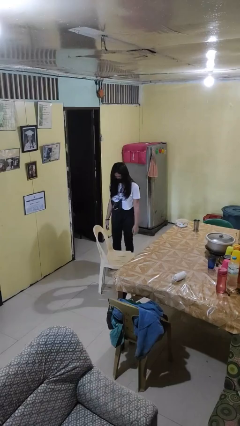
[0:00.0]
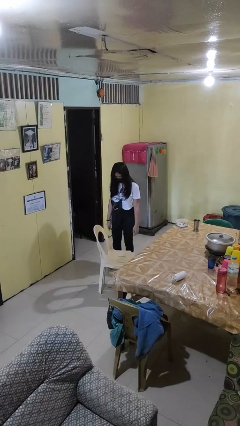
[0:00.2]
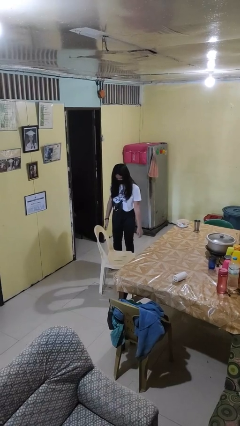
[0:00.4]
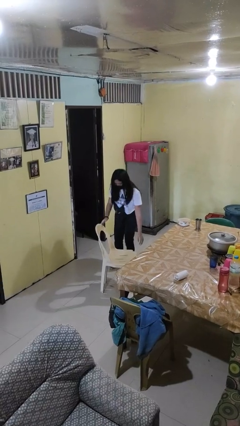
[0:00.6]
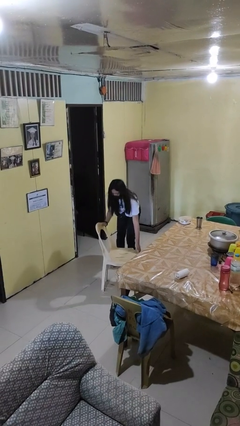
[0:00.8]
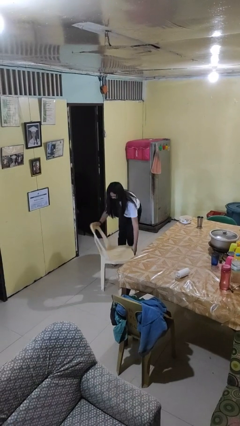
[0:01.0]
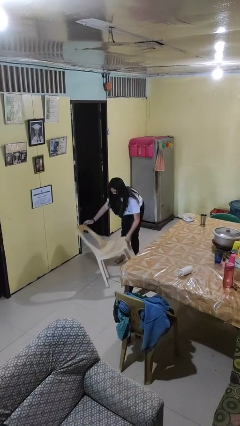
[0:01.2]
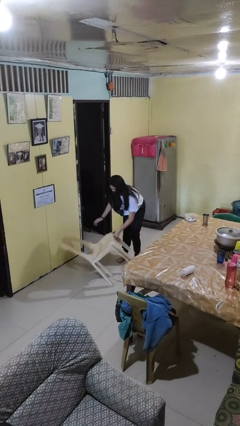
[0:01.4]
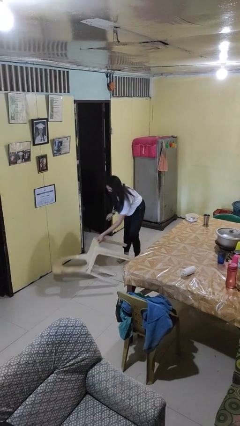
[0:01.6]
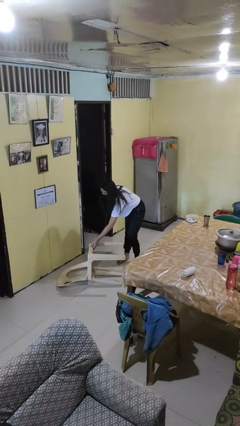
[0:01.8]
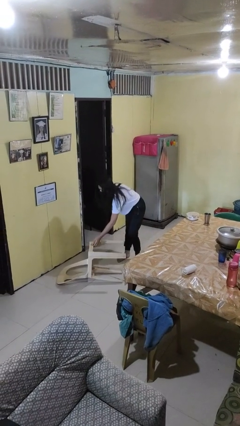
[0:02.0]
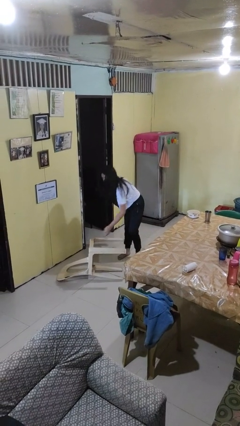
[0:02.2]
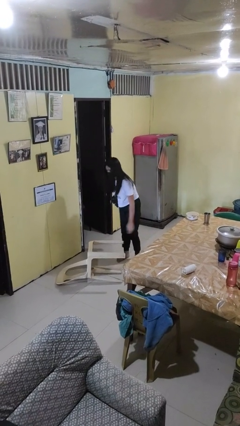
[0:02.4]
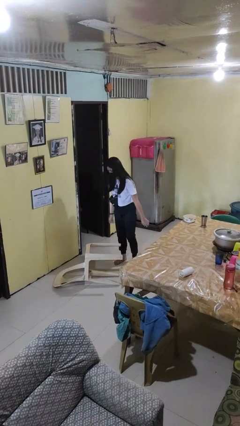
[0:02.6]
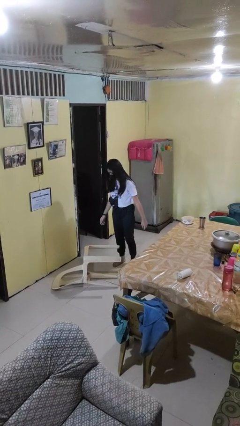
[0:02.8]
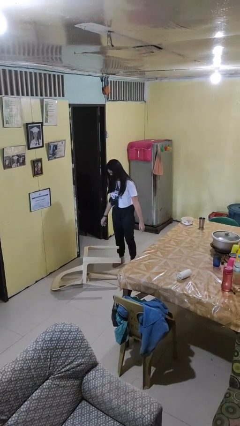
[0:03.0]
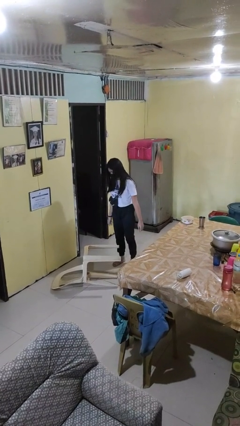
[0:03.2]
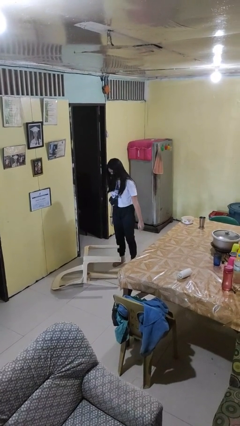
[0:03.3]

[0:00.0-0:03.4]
person knocks over furniture

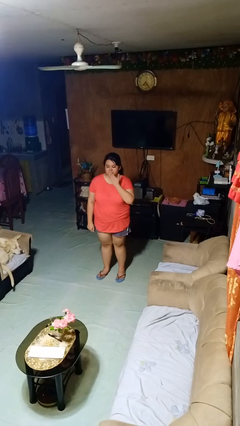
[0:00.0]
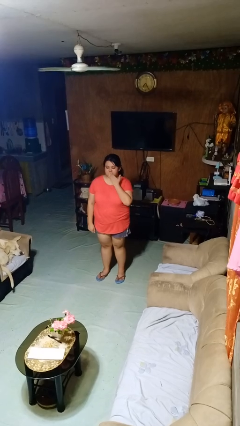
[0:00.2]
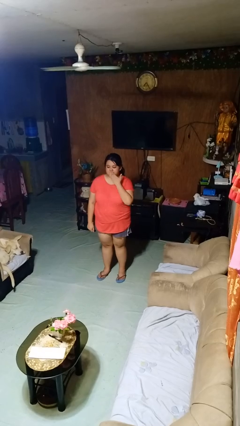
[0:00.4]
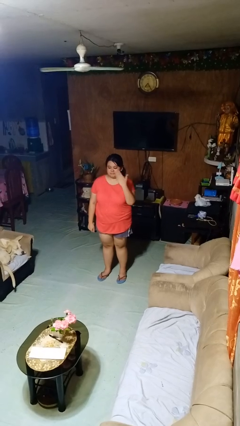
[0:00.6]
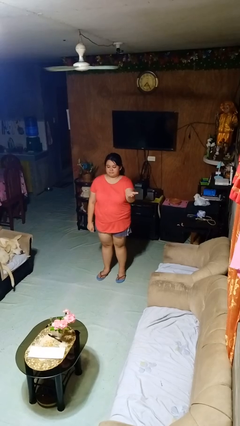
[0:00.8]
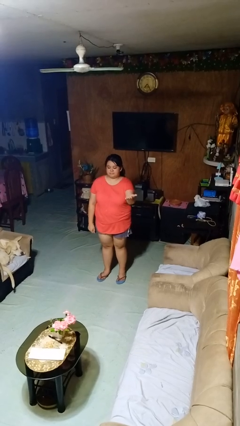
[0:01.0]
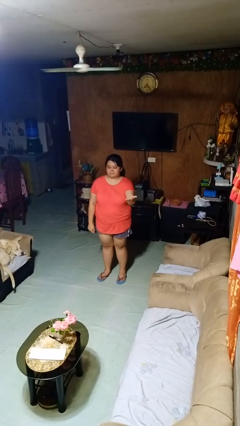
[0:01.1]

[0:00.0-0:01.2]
person gestures blow kiss

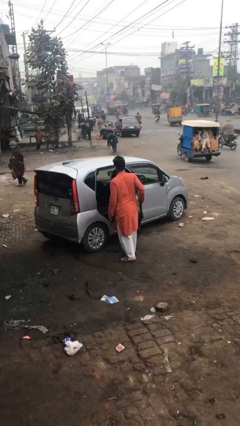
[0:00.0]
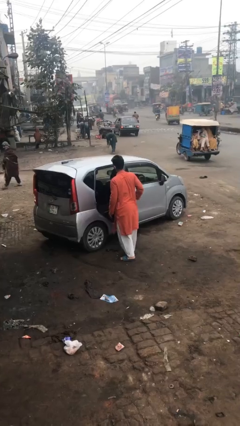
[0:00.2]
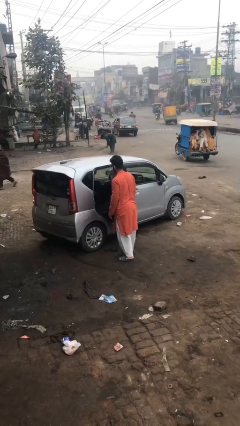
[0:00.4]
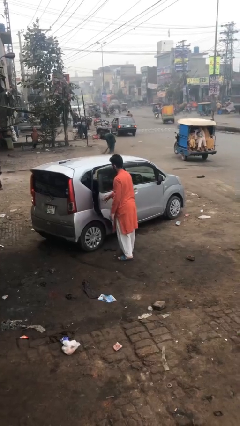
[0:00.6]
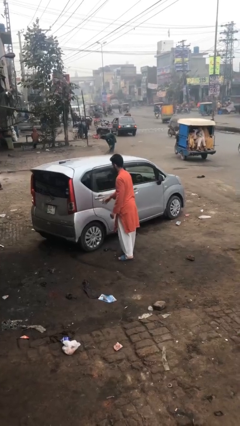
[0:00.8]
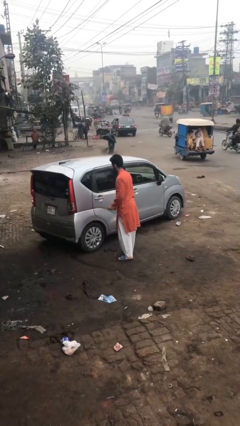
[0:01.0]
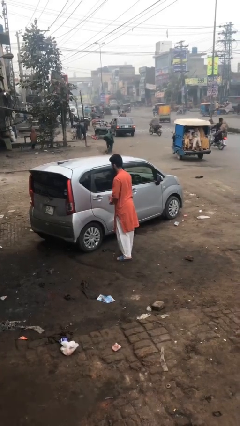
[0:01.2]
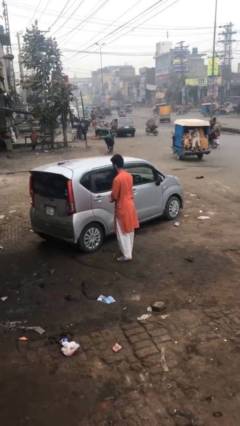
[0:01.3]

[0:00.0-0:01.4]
person closes car door

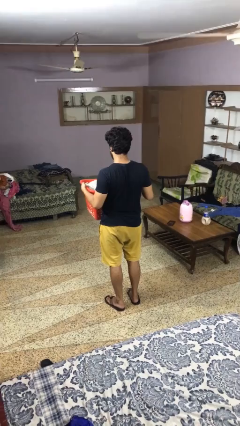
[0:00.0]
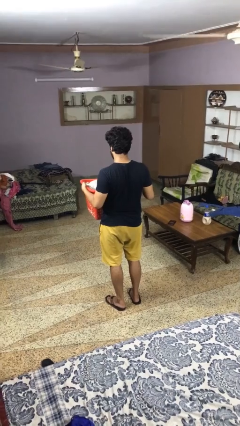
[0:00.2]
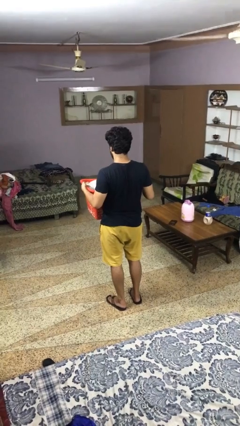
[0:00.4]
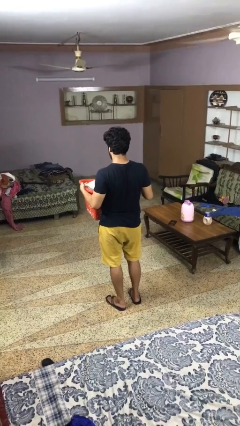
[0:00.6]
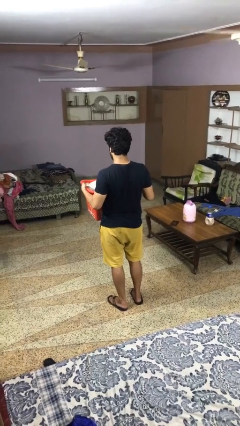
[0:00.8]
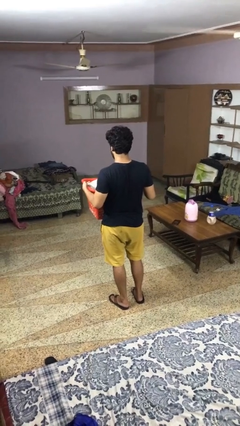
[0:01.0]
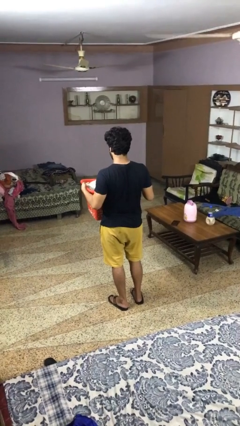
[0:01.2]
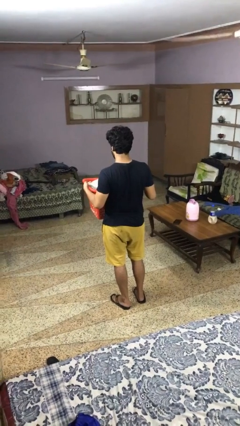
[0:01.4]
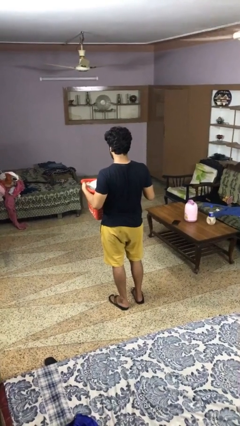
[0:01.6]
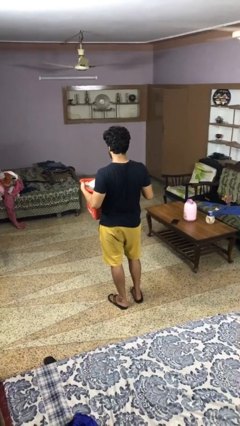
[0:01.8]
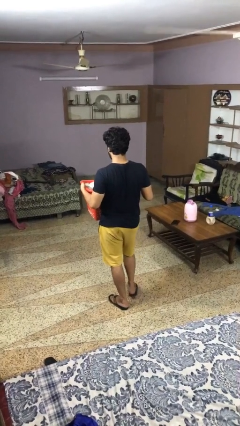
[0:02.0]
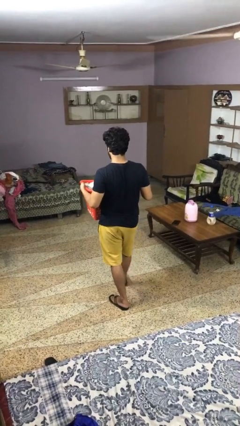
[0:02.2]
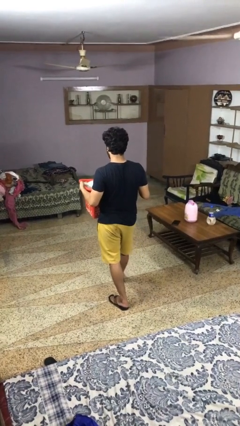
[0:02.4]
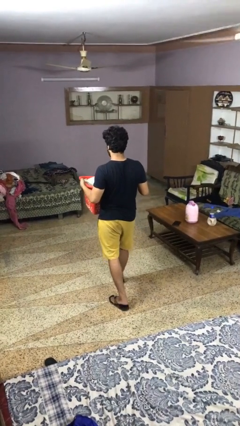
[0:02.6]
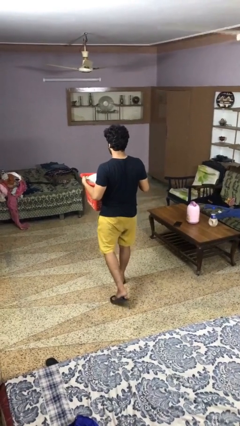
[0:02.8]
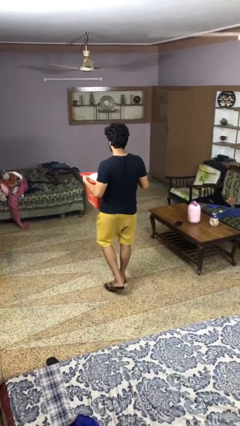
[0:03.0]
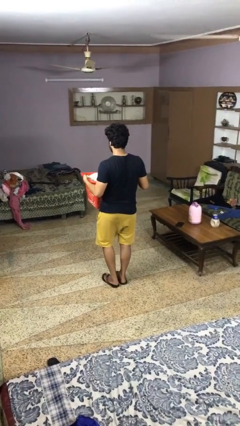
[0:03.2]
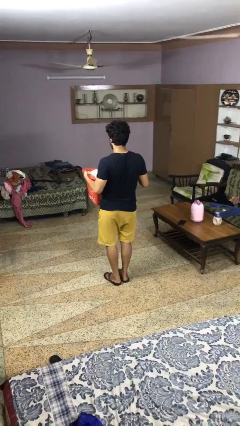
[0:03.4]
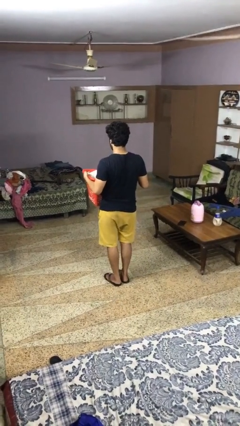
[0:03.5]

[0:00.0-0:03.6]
person carries laundry basket

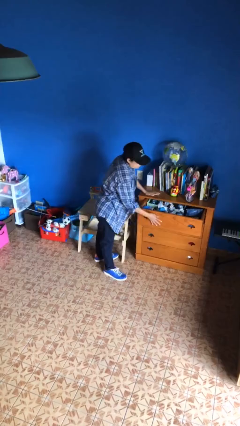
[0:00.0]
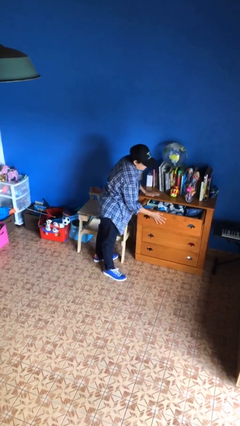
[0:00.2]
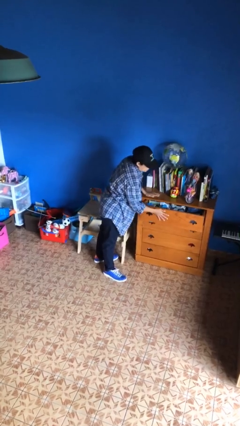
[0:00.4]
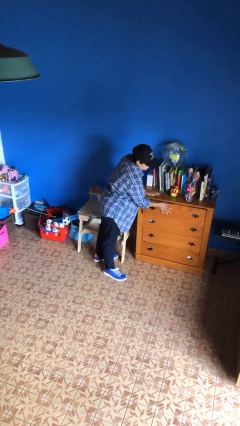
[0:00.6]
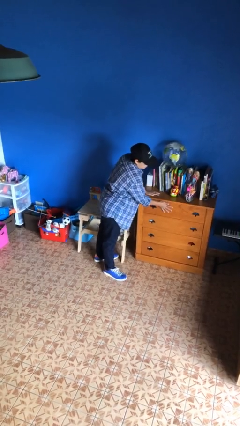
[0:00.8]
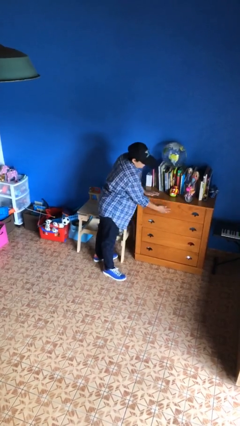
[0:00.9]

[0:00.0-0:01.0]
person closes dresser drawer

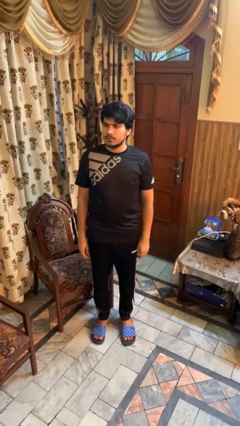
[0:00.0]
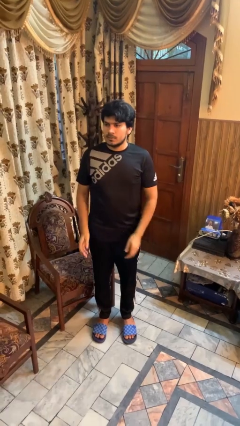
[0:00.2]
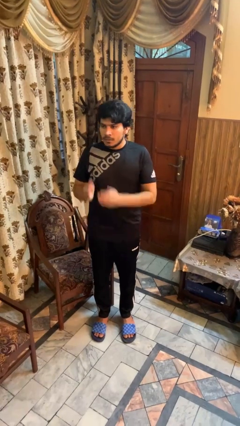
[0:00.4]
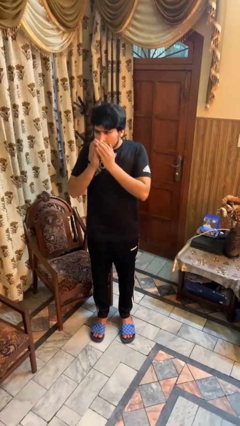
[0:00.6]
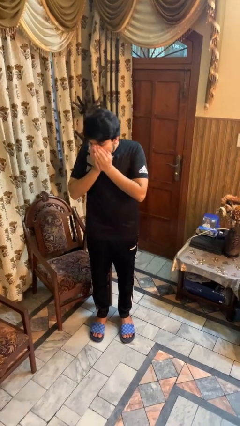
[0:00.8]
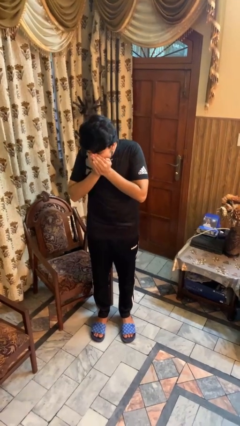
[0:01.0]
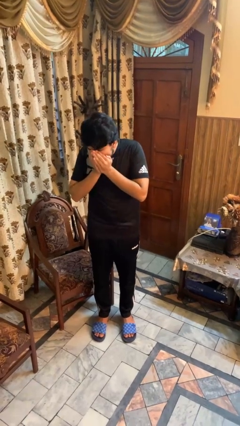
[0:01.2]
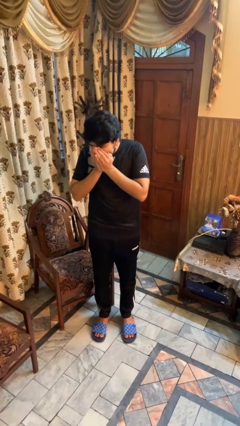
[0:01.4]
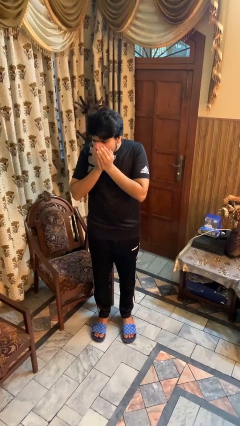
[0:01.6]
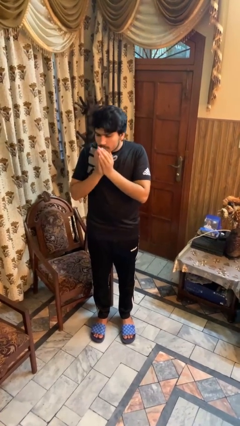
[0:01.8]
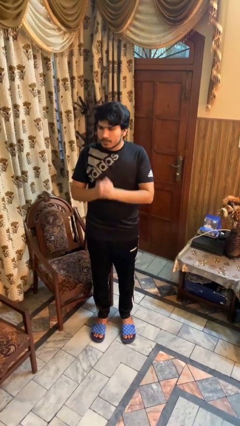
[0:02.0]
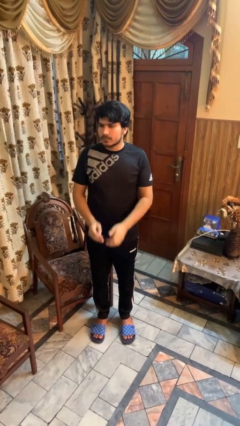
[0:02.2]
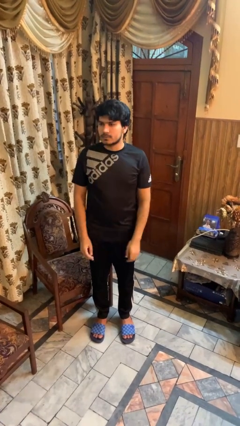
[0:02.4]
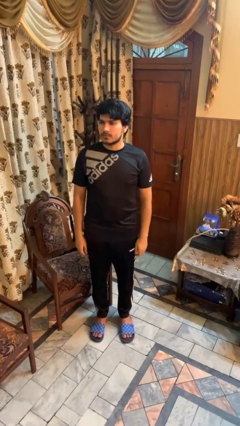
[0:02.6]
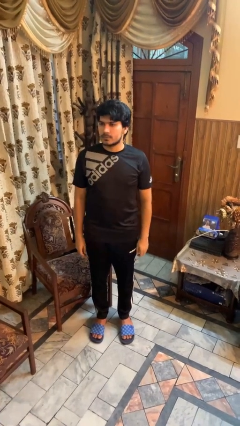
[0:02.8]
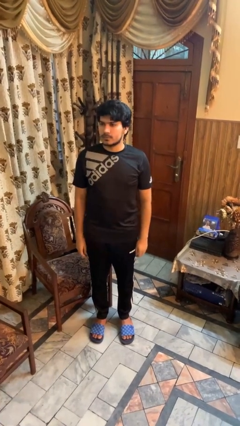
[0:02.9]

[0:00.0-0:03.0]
person sneezes into hand

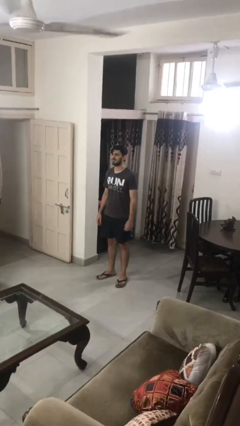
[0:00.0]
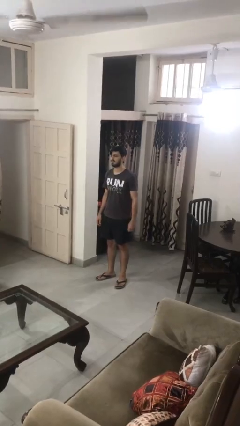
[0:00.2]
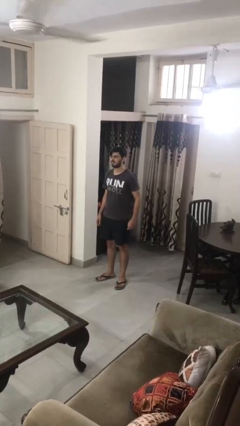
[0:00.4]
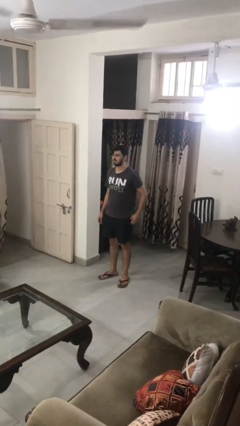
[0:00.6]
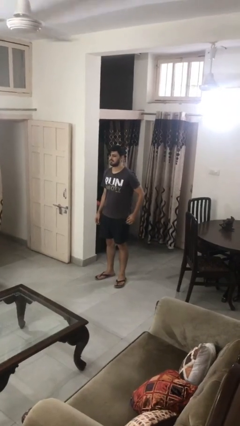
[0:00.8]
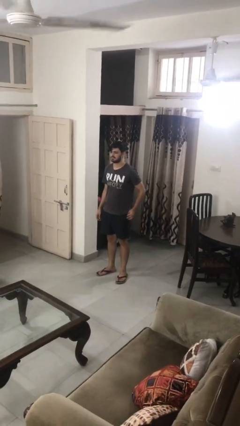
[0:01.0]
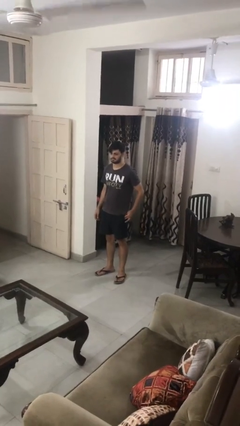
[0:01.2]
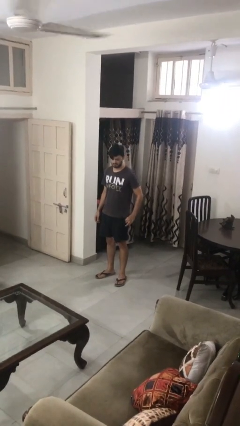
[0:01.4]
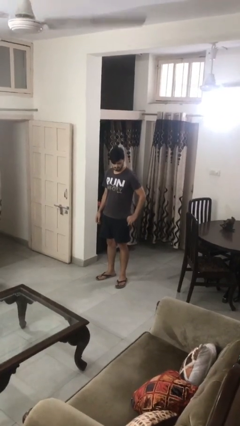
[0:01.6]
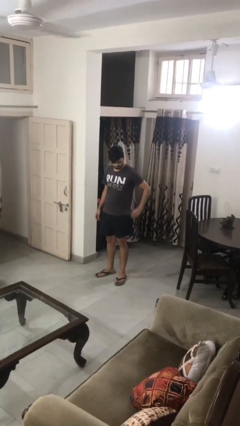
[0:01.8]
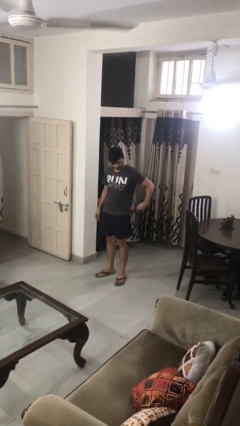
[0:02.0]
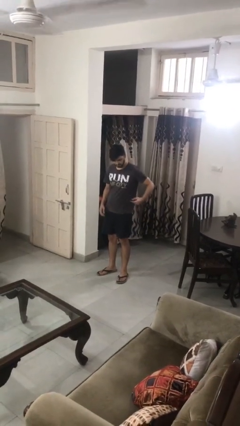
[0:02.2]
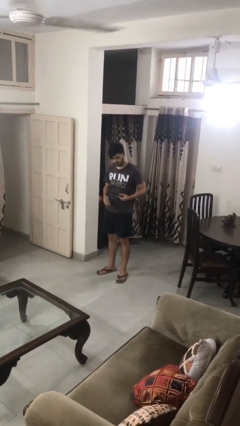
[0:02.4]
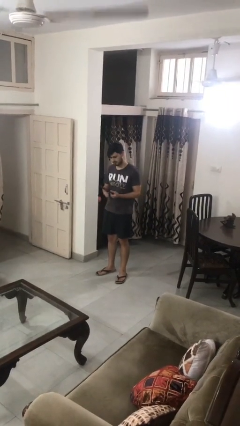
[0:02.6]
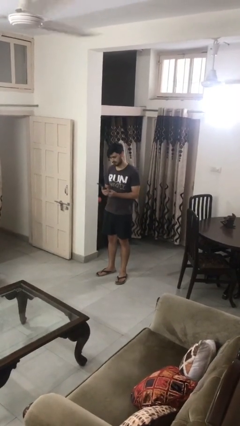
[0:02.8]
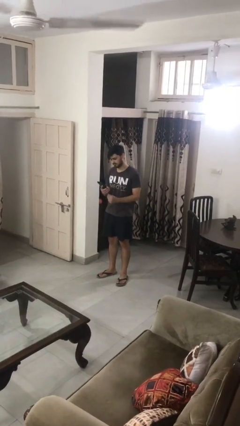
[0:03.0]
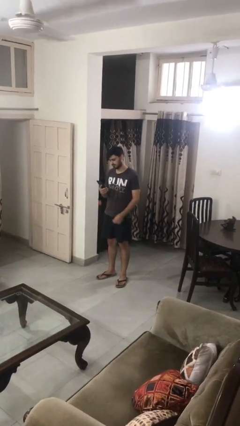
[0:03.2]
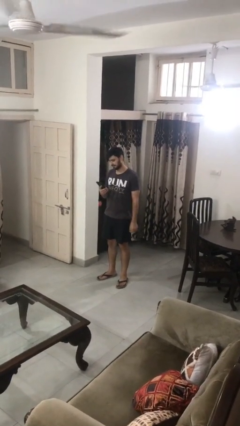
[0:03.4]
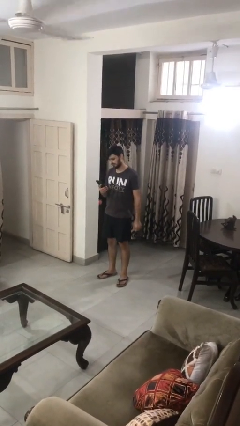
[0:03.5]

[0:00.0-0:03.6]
person takes phone from pocket
